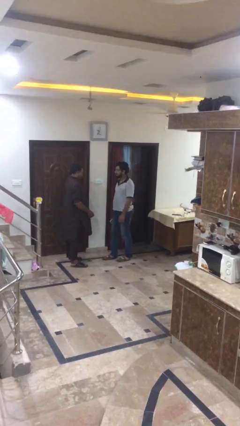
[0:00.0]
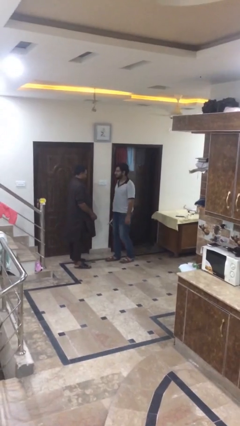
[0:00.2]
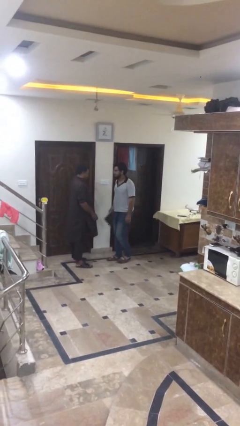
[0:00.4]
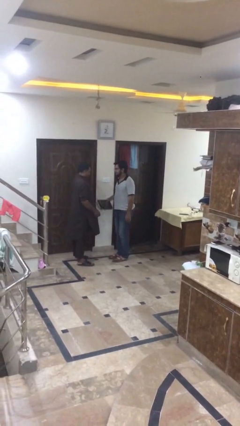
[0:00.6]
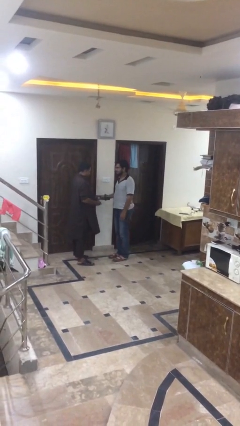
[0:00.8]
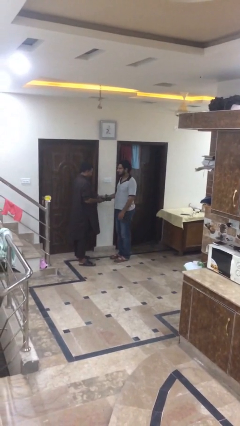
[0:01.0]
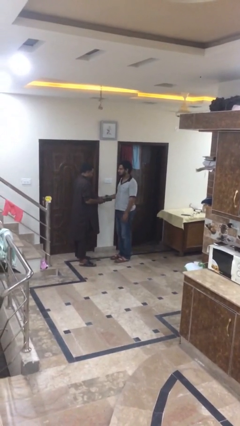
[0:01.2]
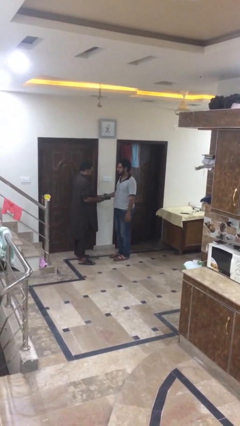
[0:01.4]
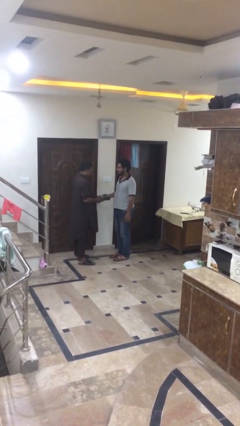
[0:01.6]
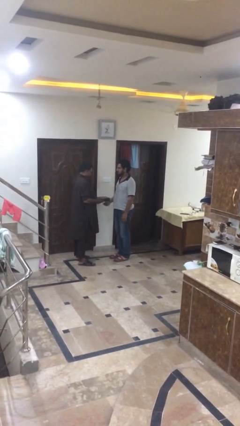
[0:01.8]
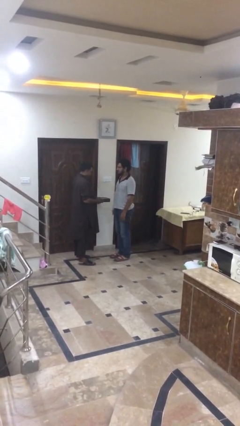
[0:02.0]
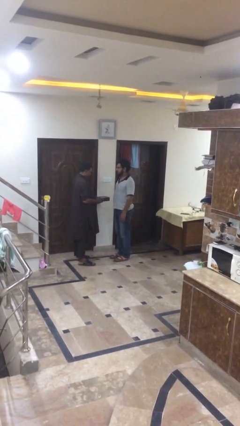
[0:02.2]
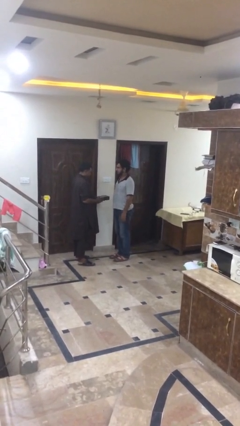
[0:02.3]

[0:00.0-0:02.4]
person transfers object to person

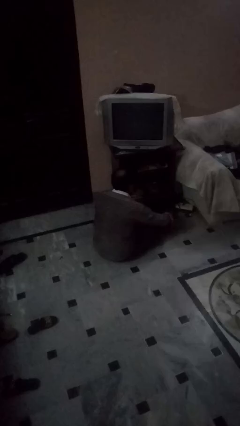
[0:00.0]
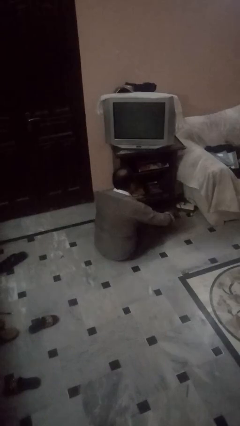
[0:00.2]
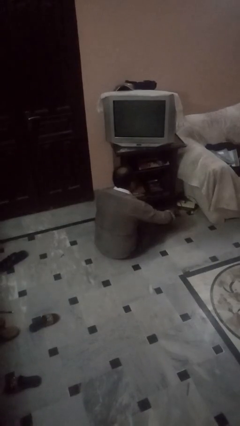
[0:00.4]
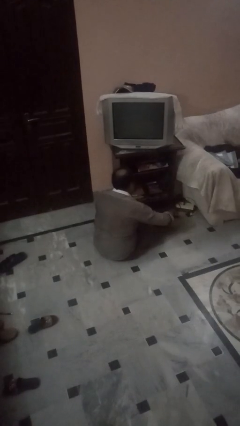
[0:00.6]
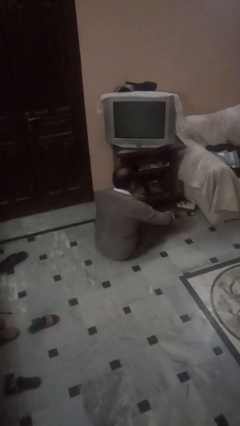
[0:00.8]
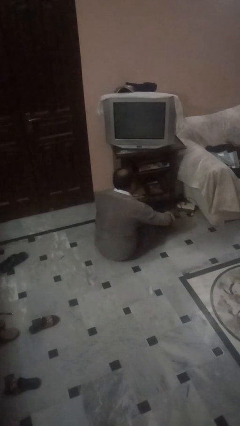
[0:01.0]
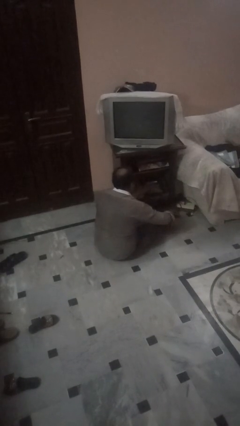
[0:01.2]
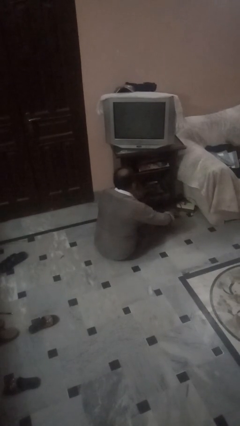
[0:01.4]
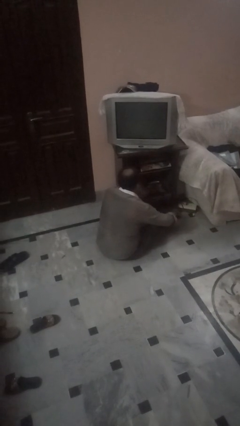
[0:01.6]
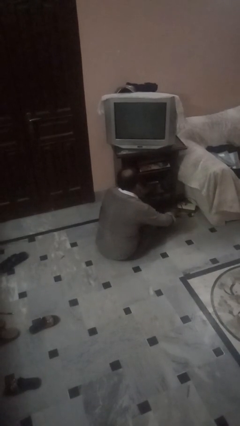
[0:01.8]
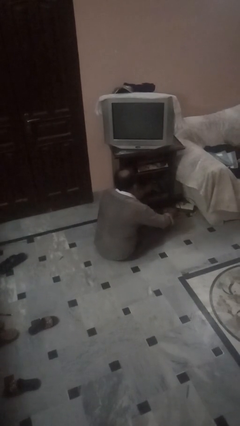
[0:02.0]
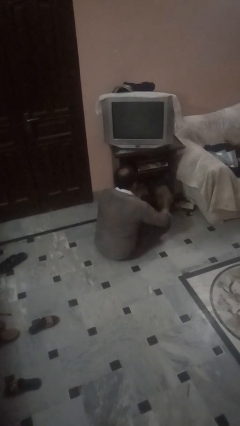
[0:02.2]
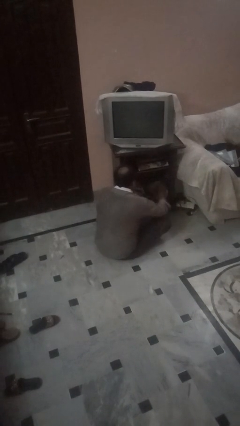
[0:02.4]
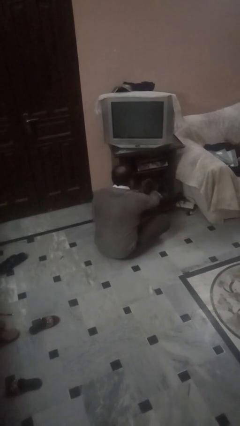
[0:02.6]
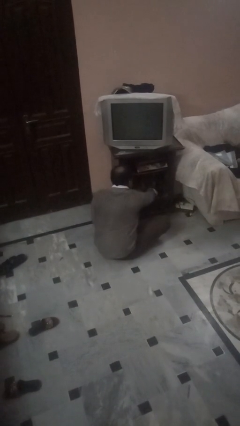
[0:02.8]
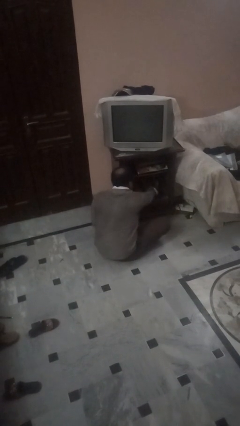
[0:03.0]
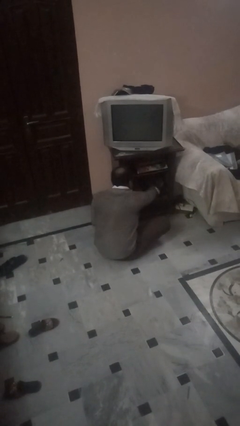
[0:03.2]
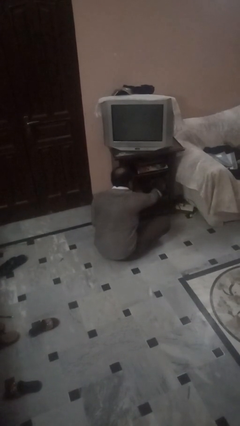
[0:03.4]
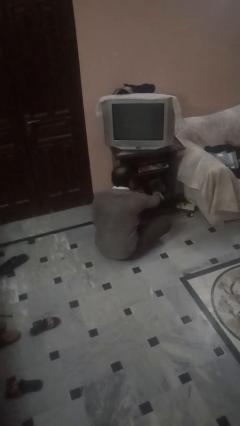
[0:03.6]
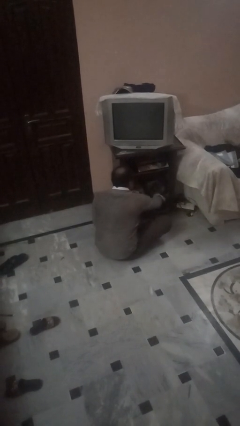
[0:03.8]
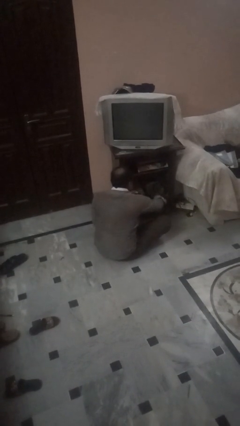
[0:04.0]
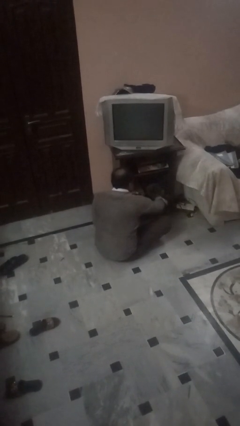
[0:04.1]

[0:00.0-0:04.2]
person dusts furniture

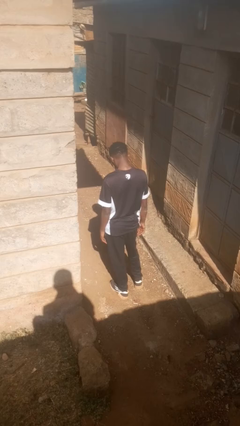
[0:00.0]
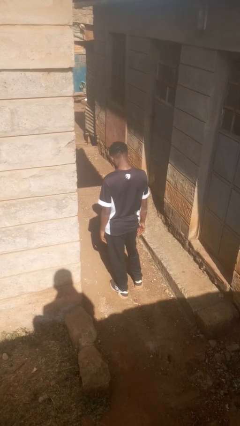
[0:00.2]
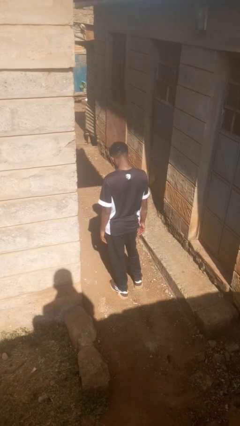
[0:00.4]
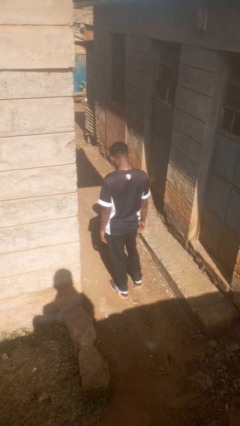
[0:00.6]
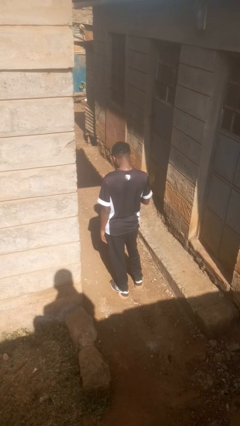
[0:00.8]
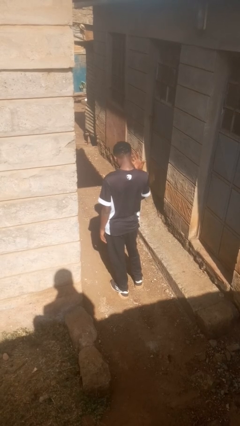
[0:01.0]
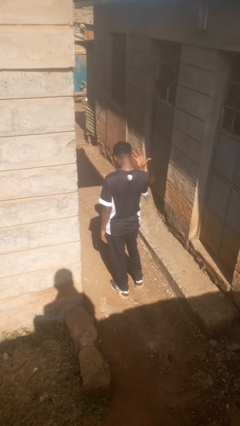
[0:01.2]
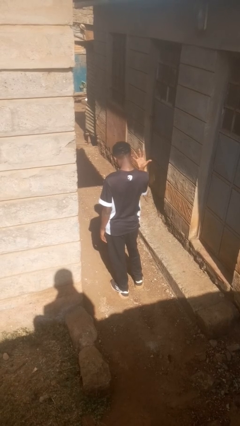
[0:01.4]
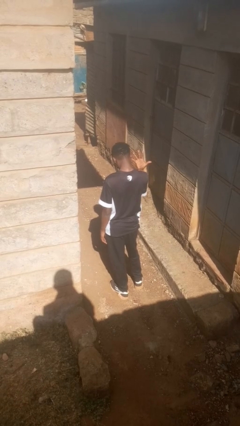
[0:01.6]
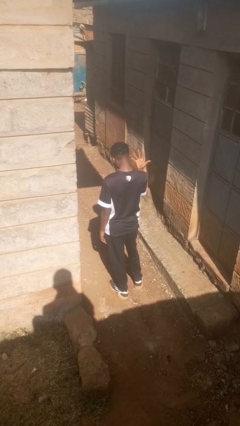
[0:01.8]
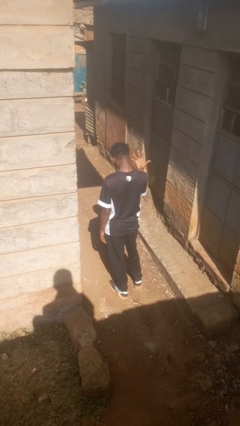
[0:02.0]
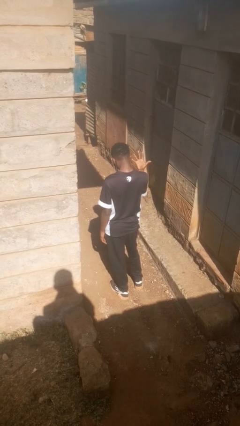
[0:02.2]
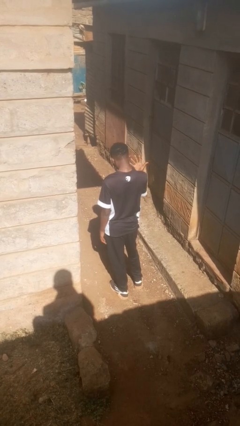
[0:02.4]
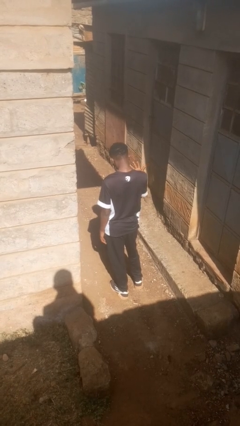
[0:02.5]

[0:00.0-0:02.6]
person gestures number five

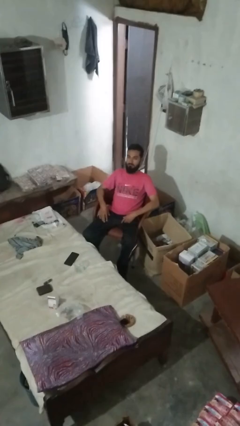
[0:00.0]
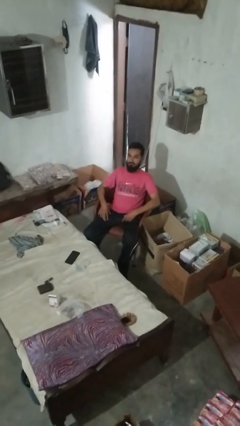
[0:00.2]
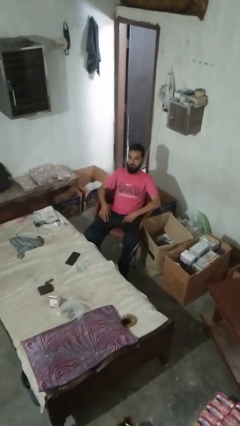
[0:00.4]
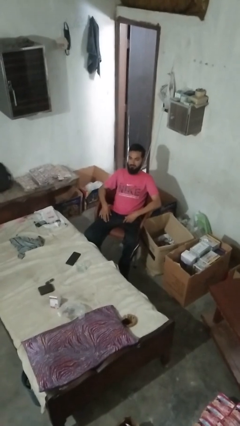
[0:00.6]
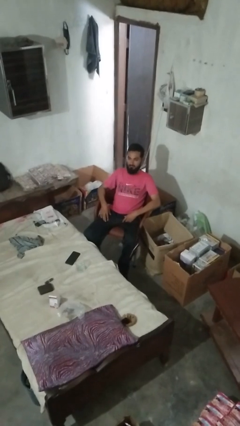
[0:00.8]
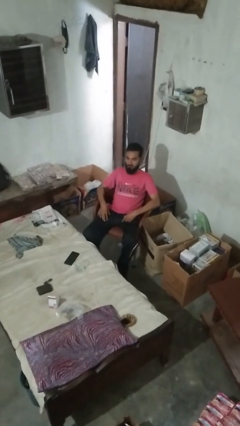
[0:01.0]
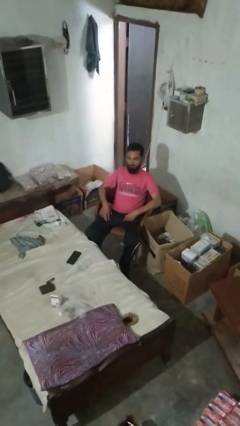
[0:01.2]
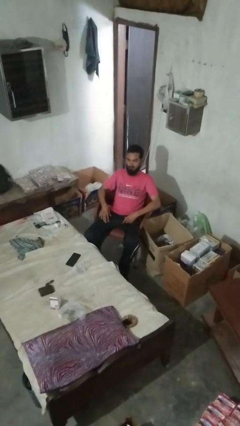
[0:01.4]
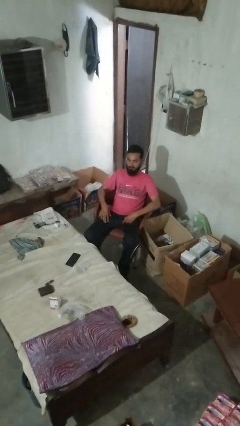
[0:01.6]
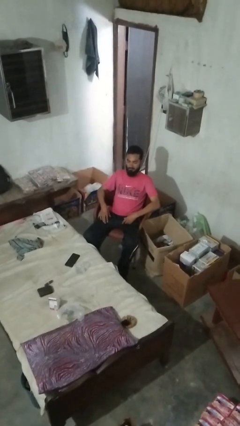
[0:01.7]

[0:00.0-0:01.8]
person shakes head

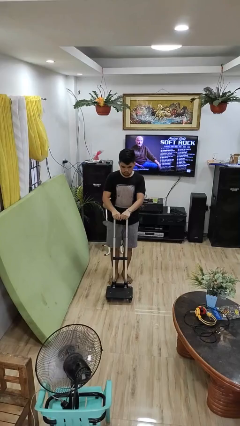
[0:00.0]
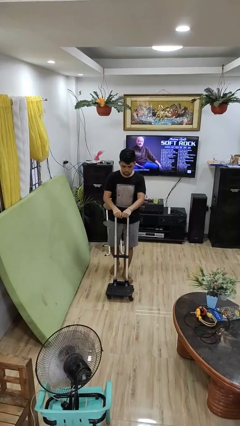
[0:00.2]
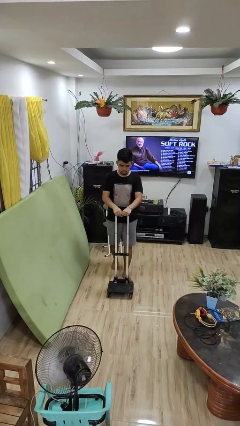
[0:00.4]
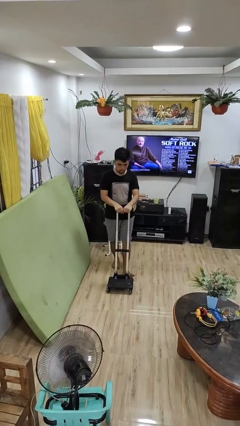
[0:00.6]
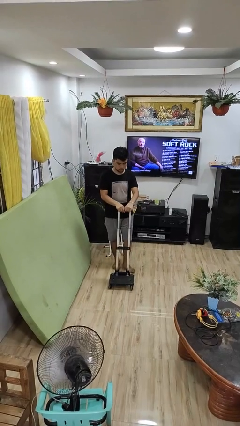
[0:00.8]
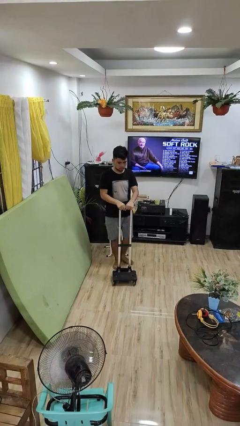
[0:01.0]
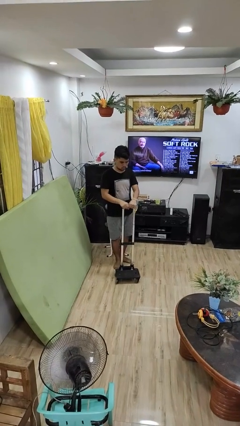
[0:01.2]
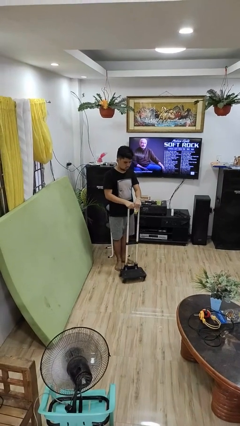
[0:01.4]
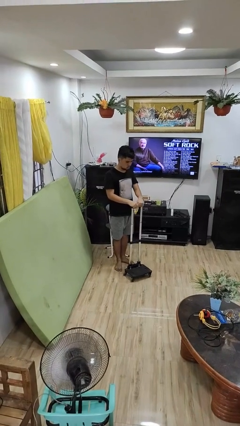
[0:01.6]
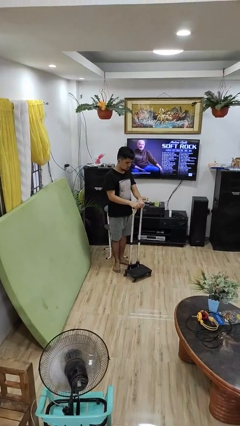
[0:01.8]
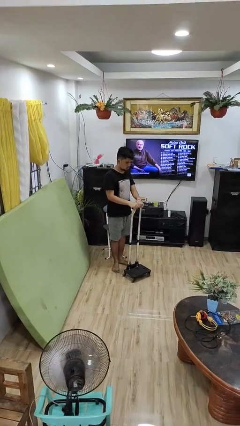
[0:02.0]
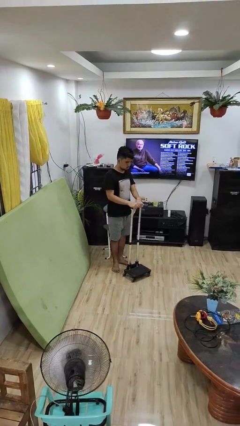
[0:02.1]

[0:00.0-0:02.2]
person pulls wheeled cart

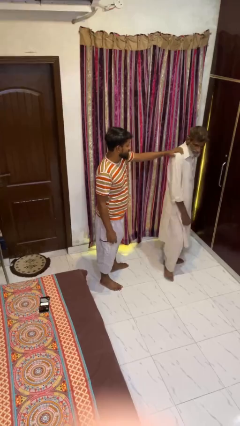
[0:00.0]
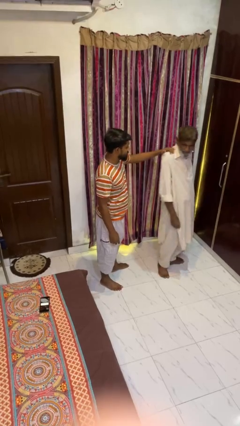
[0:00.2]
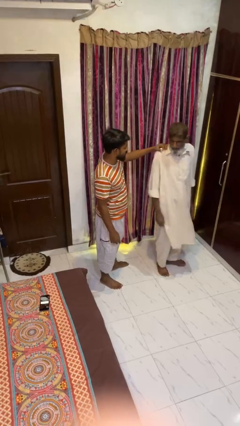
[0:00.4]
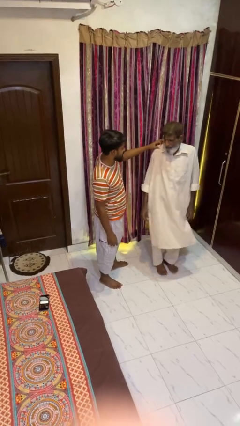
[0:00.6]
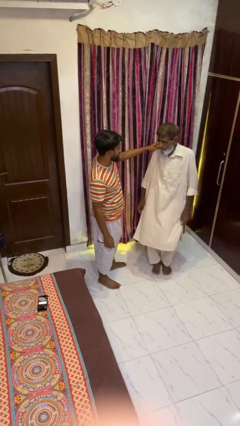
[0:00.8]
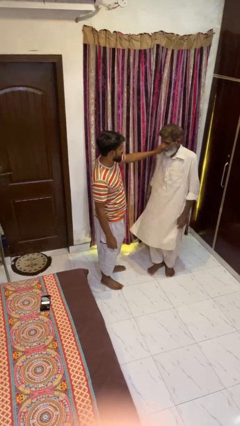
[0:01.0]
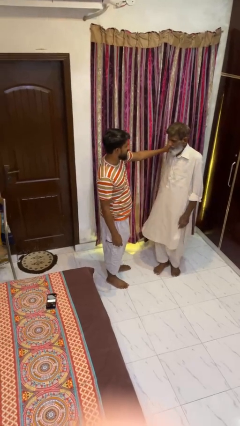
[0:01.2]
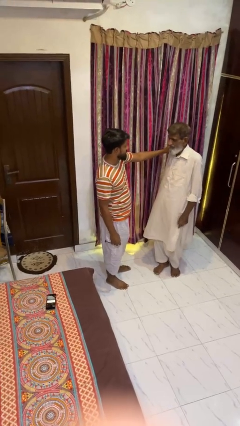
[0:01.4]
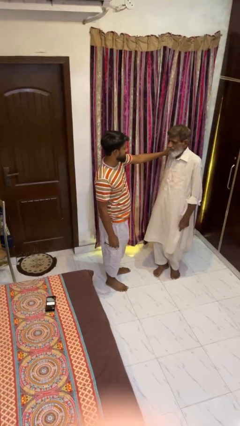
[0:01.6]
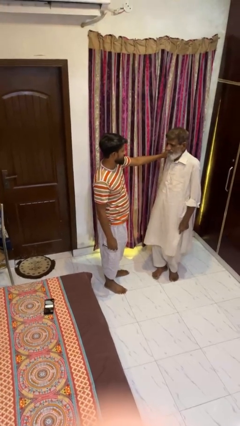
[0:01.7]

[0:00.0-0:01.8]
person spins person around

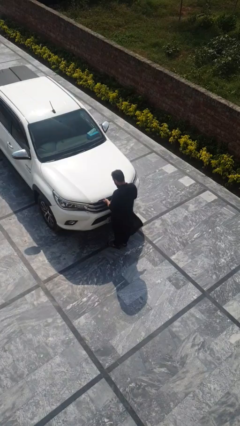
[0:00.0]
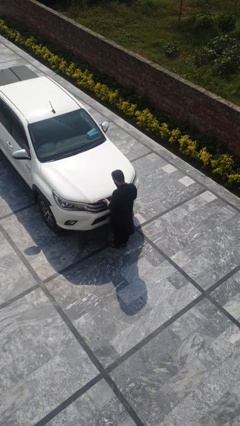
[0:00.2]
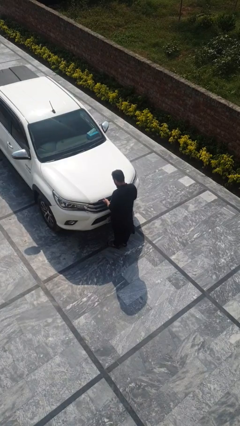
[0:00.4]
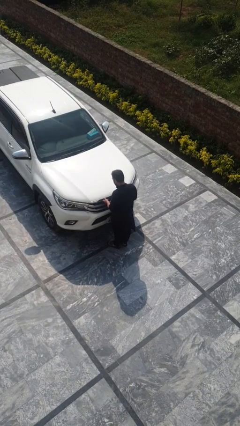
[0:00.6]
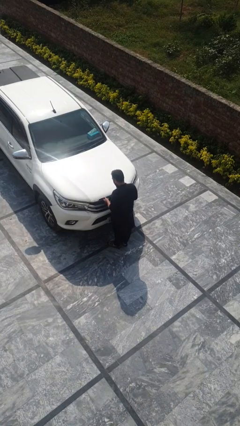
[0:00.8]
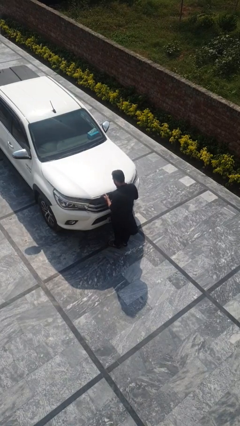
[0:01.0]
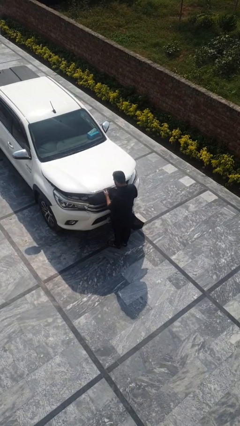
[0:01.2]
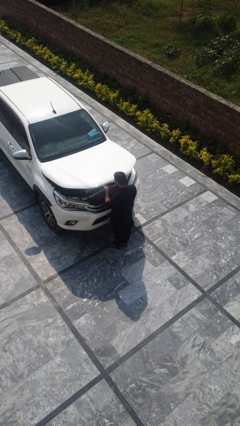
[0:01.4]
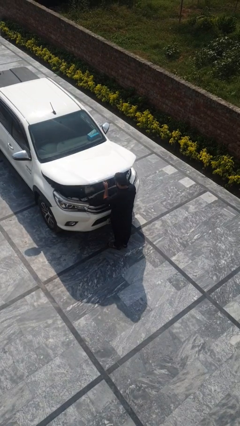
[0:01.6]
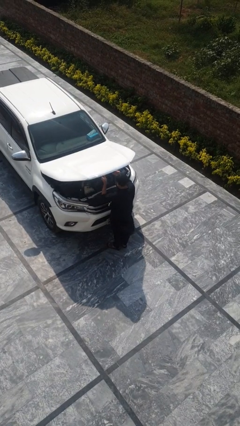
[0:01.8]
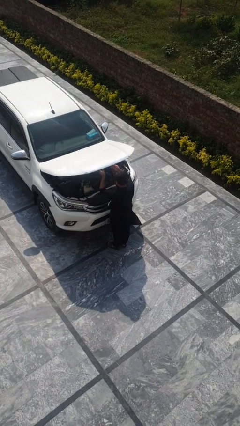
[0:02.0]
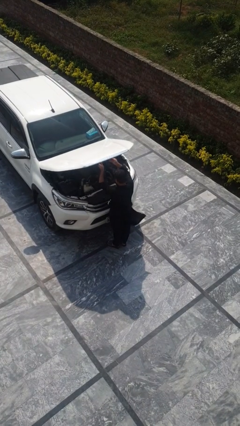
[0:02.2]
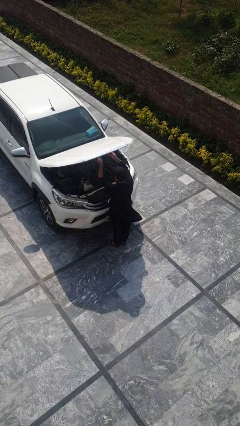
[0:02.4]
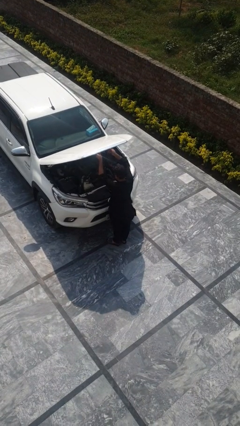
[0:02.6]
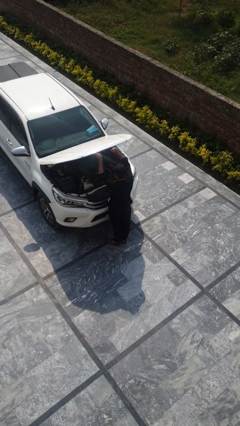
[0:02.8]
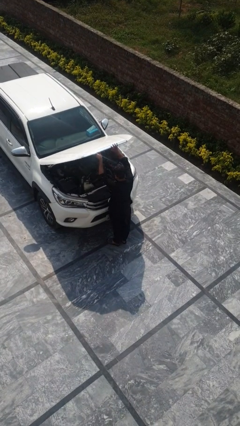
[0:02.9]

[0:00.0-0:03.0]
person opens car hood
